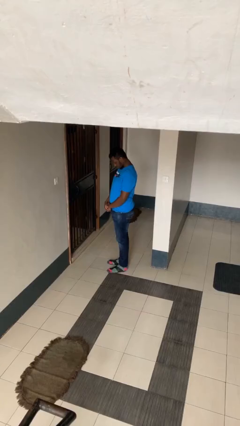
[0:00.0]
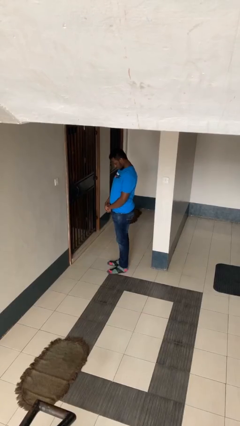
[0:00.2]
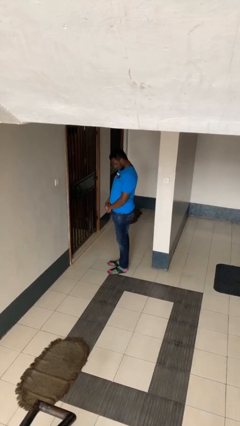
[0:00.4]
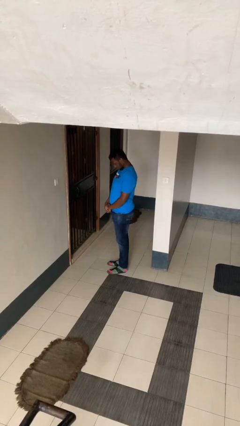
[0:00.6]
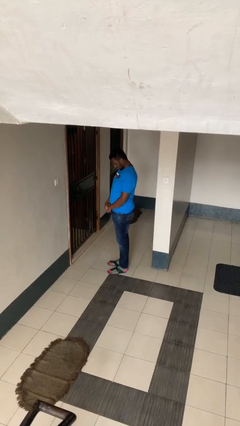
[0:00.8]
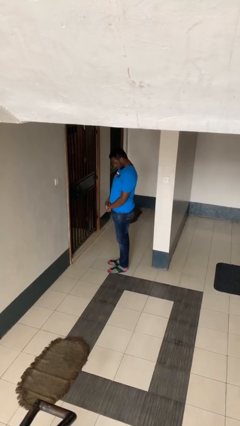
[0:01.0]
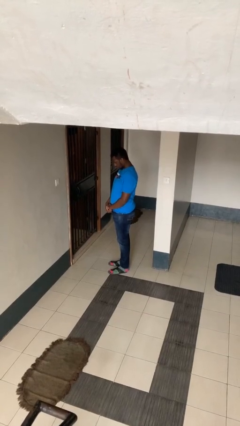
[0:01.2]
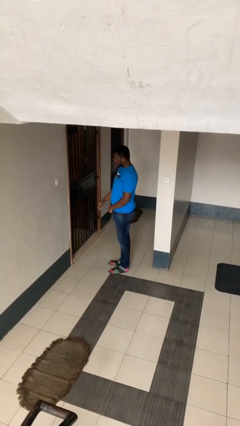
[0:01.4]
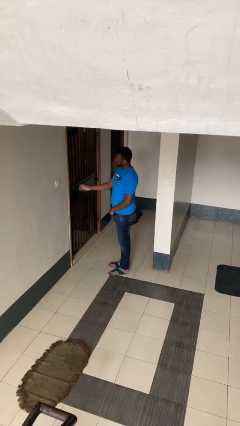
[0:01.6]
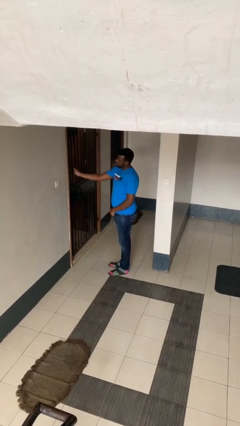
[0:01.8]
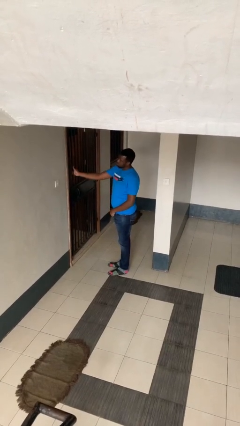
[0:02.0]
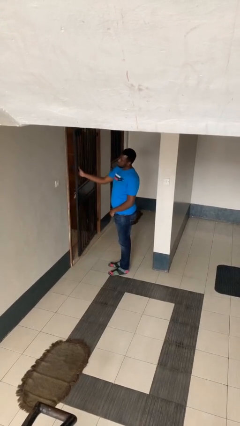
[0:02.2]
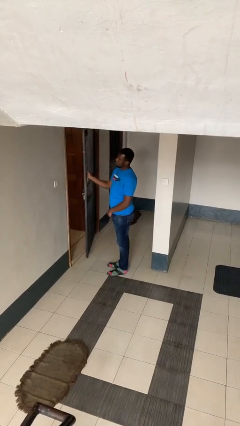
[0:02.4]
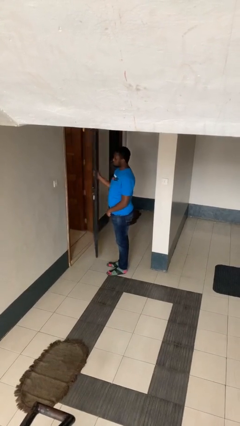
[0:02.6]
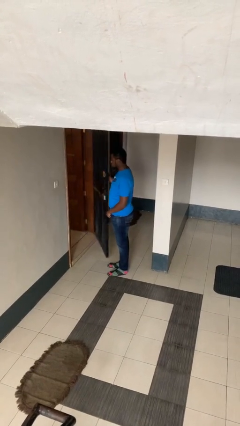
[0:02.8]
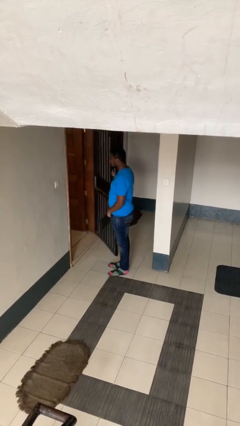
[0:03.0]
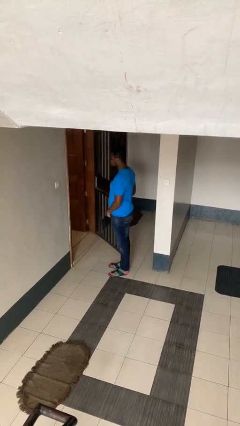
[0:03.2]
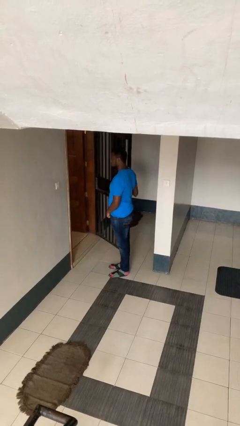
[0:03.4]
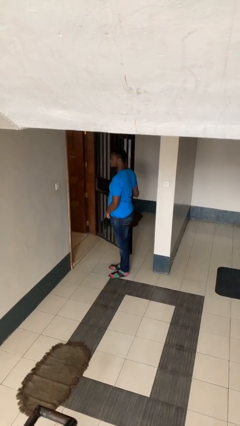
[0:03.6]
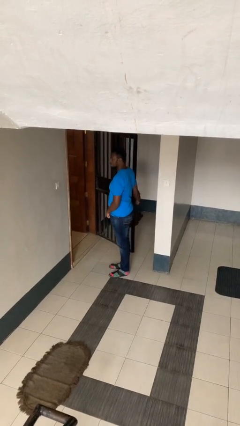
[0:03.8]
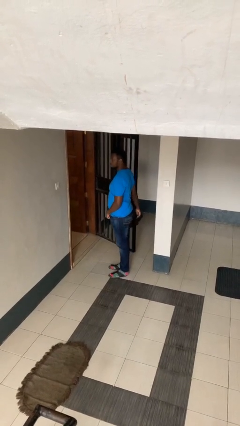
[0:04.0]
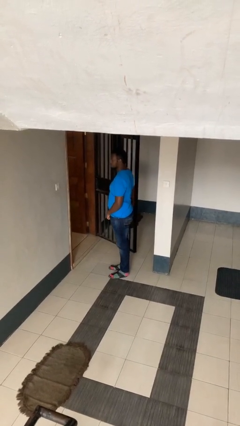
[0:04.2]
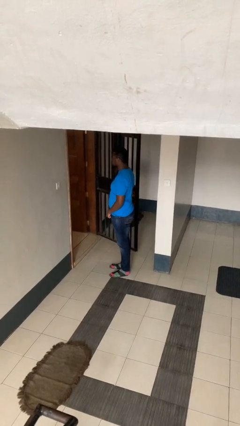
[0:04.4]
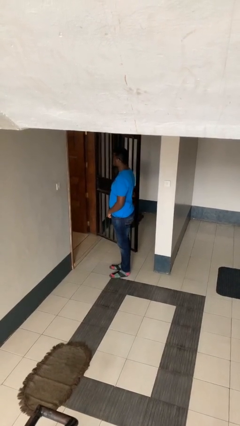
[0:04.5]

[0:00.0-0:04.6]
person opens facility door

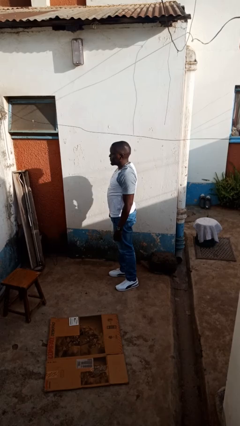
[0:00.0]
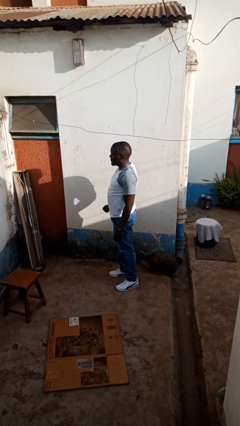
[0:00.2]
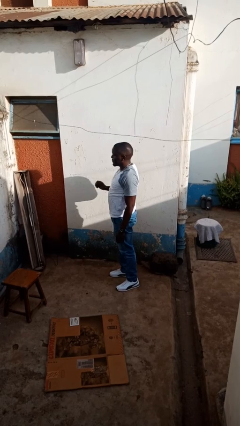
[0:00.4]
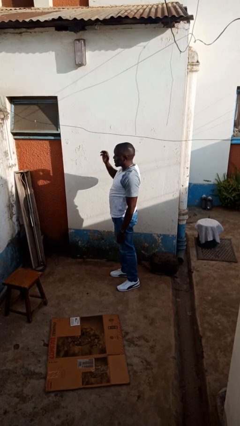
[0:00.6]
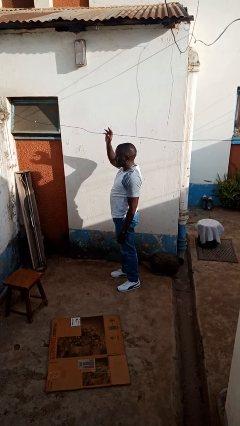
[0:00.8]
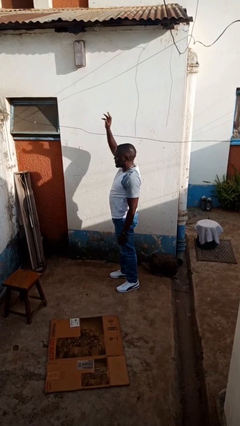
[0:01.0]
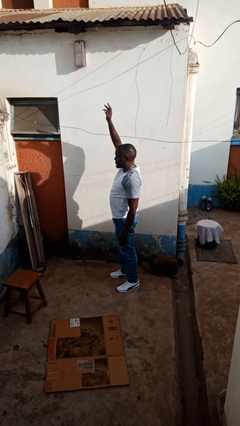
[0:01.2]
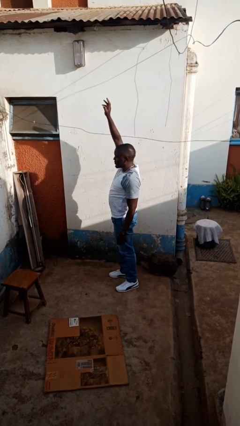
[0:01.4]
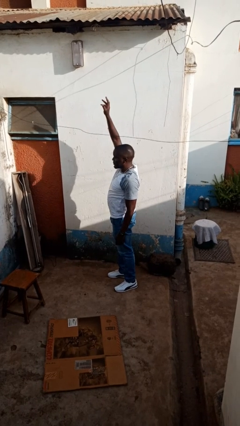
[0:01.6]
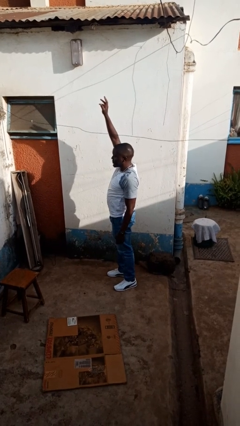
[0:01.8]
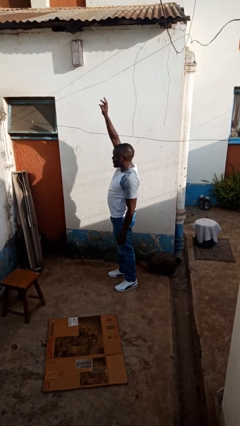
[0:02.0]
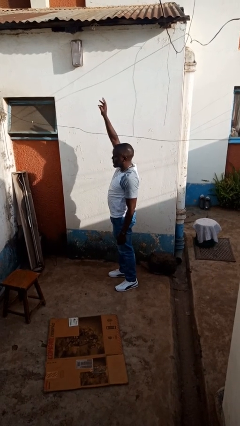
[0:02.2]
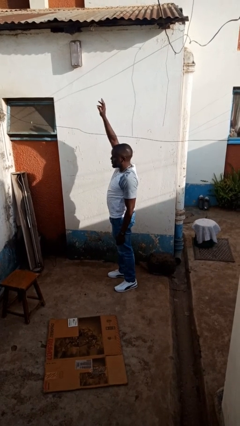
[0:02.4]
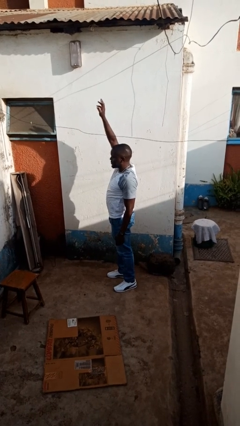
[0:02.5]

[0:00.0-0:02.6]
person gestures raise hand

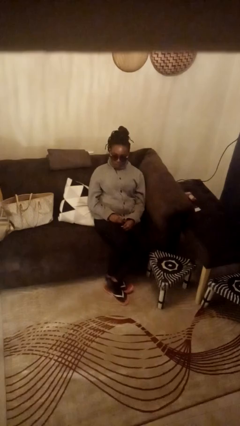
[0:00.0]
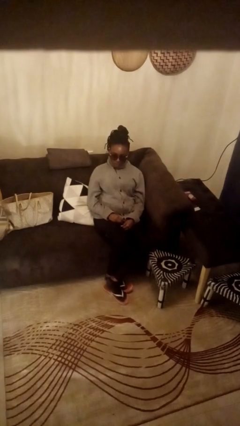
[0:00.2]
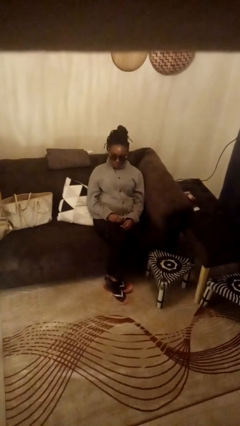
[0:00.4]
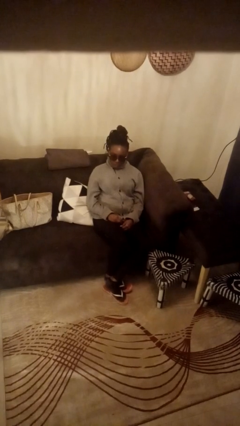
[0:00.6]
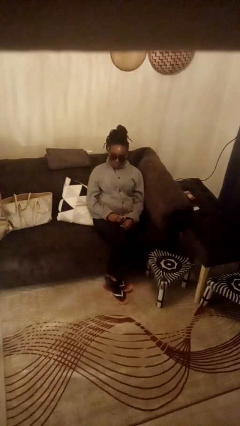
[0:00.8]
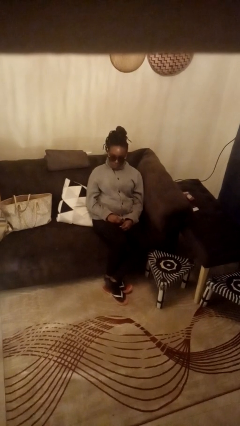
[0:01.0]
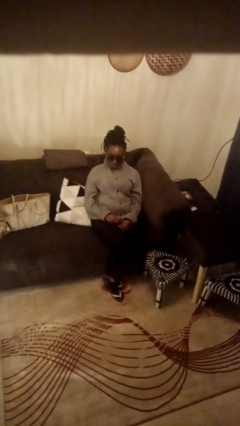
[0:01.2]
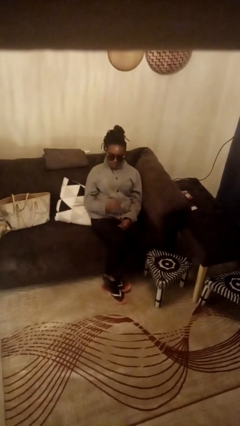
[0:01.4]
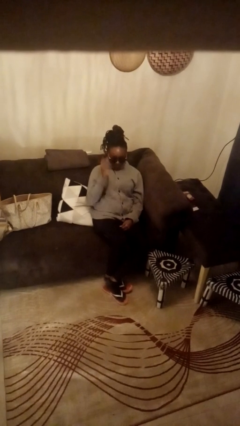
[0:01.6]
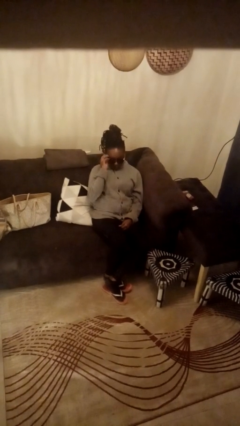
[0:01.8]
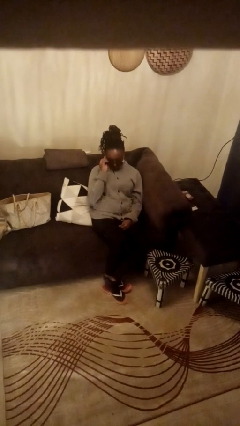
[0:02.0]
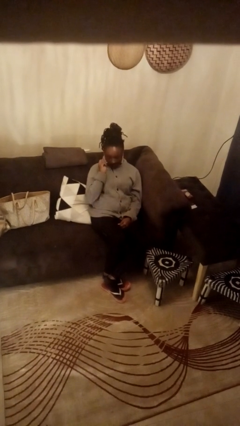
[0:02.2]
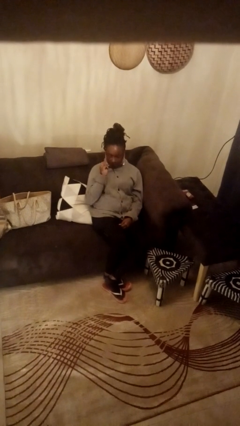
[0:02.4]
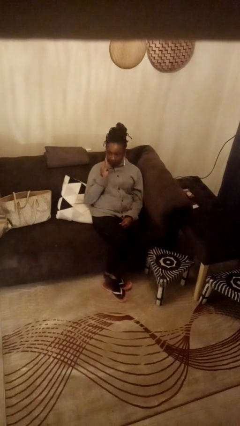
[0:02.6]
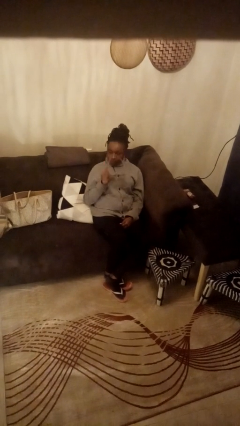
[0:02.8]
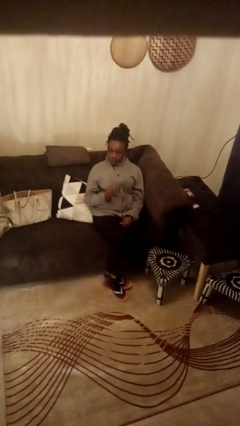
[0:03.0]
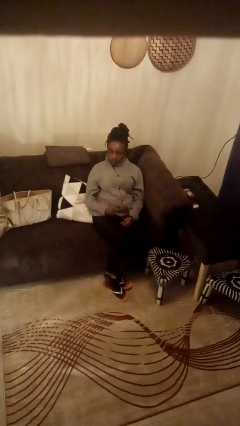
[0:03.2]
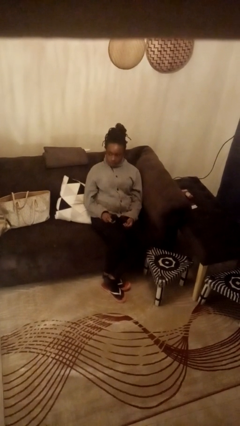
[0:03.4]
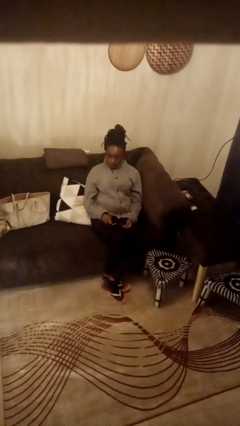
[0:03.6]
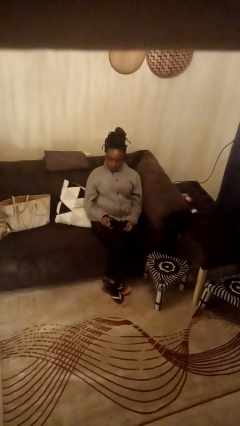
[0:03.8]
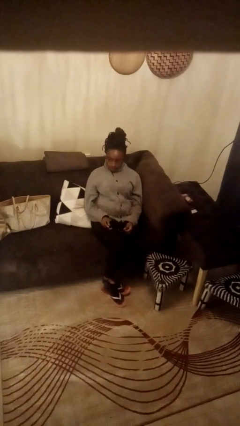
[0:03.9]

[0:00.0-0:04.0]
person takes off sunglasses

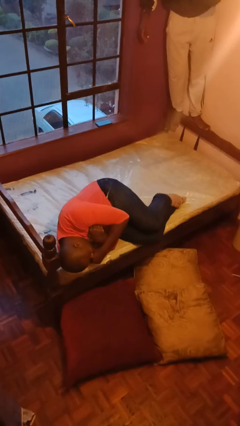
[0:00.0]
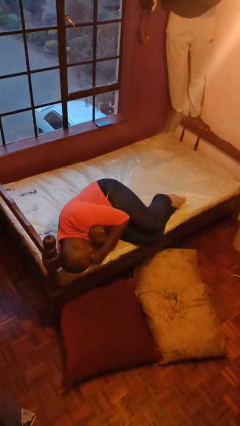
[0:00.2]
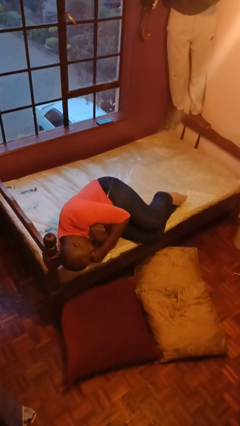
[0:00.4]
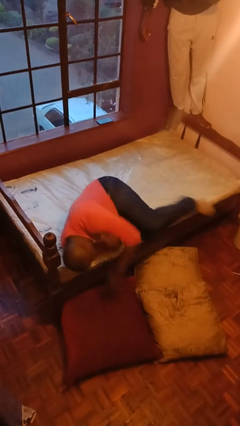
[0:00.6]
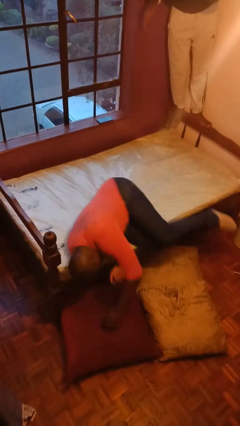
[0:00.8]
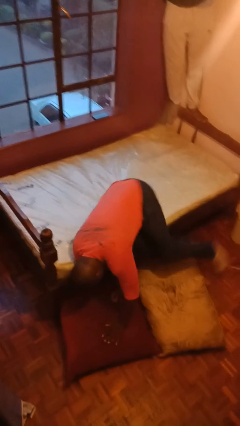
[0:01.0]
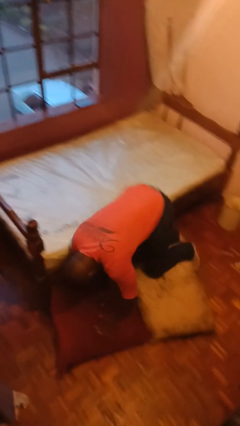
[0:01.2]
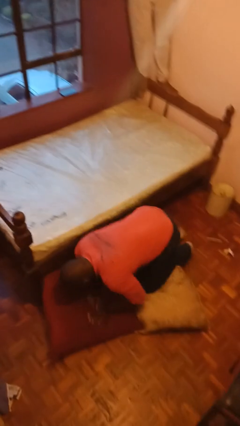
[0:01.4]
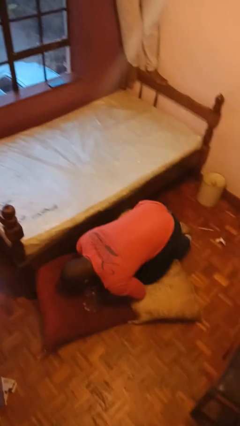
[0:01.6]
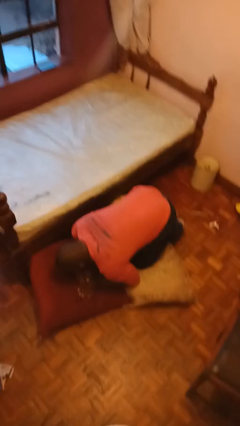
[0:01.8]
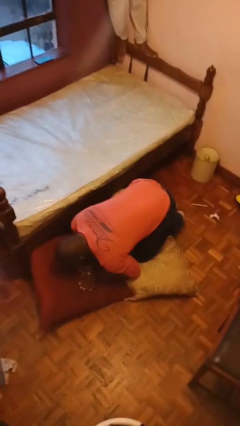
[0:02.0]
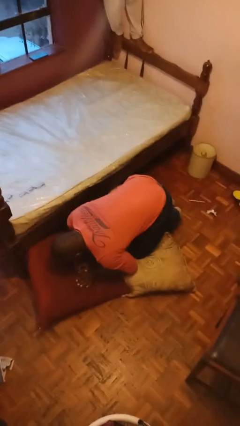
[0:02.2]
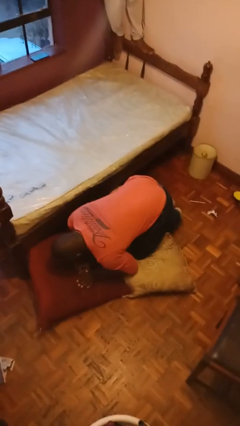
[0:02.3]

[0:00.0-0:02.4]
person falls from bed

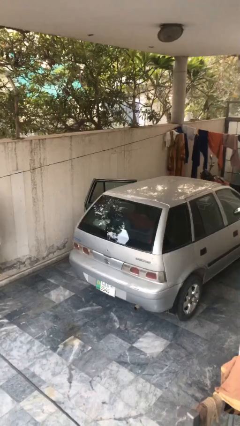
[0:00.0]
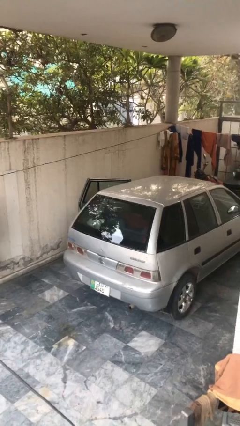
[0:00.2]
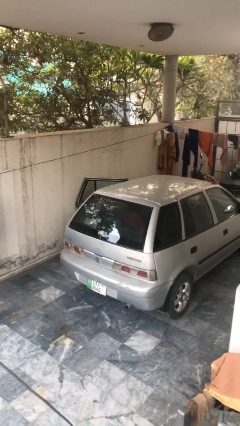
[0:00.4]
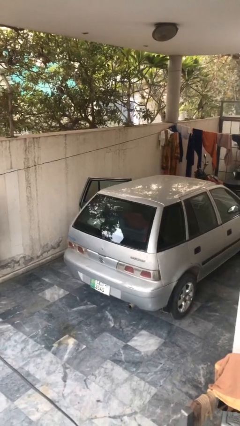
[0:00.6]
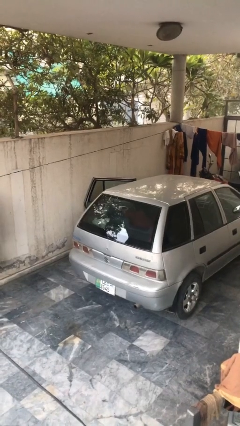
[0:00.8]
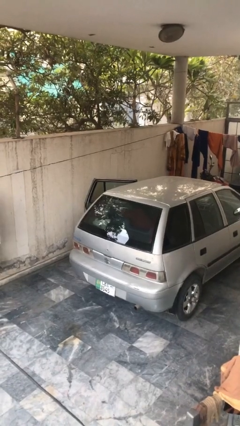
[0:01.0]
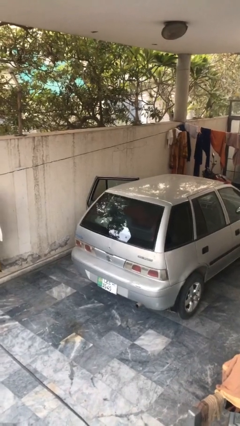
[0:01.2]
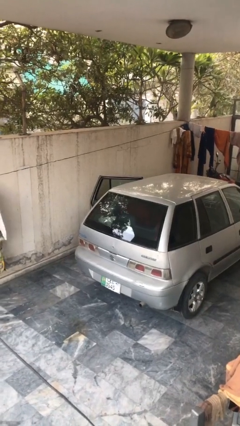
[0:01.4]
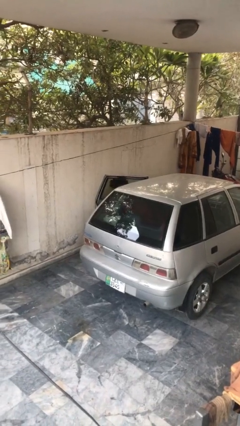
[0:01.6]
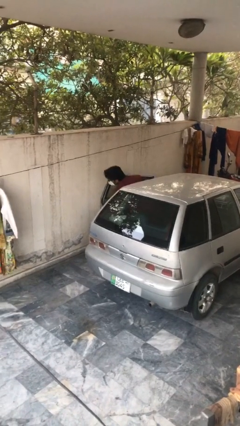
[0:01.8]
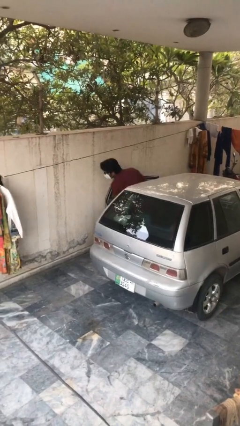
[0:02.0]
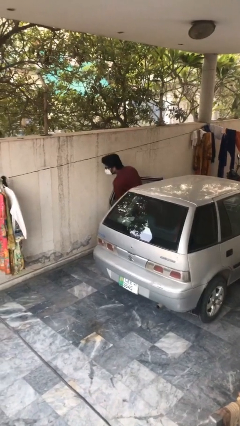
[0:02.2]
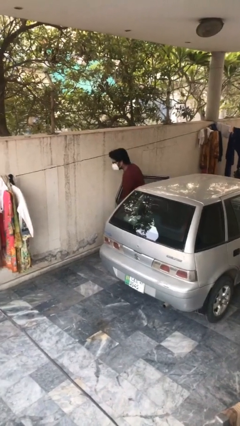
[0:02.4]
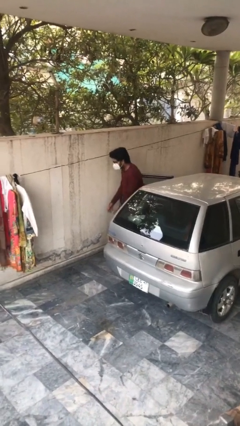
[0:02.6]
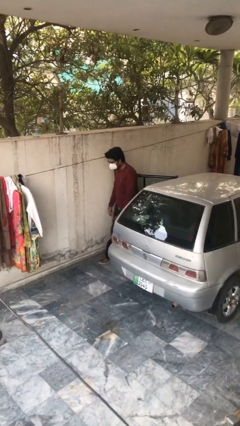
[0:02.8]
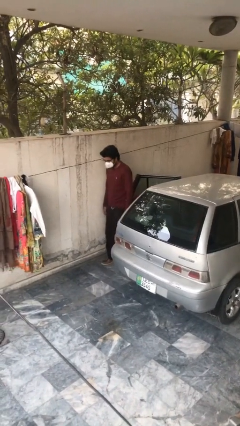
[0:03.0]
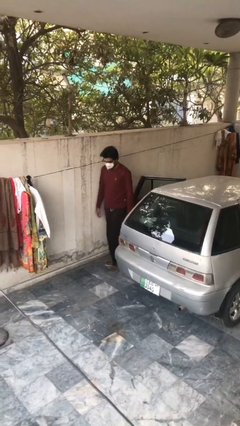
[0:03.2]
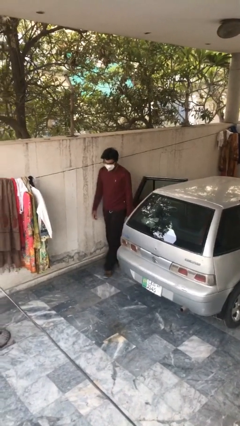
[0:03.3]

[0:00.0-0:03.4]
person exits car

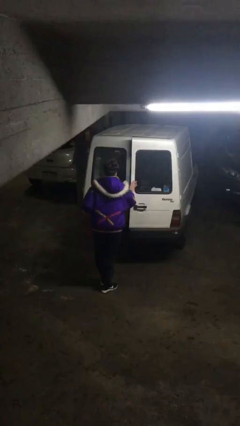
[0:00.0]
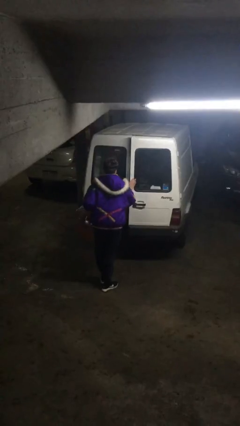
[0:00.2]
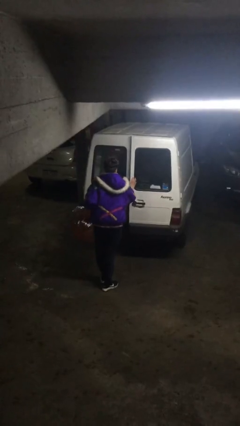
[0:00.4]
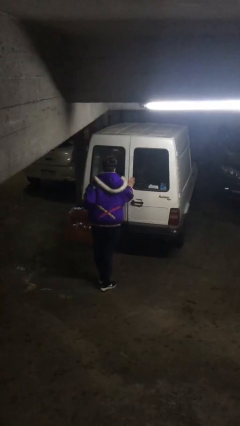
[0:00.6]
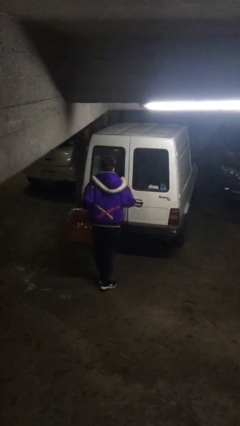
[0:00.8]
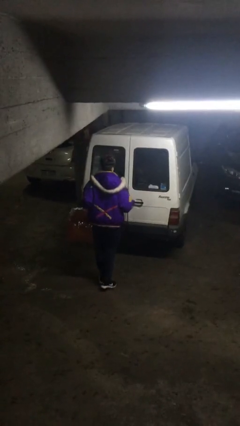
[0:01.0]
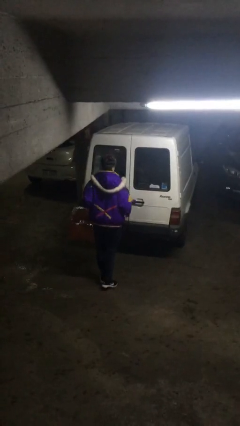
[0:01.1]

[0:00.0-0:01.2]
person closes car door
